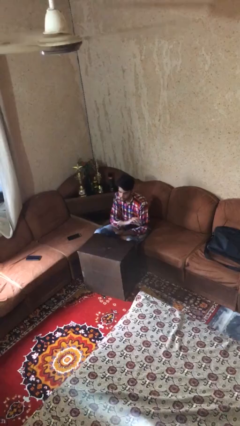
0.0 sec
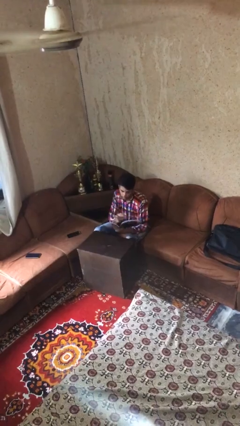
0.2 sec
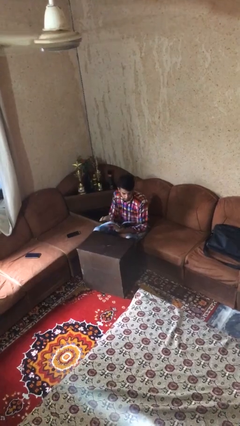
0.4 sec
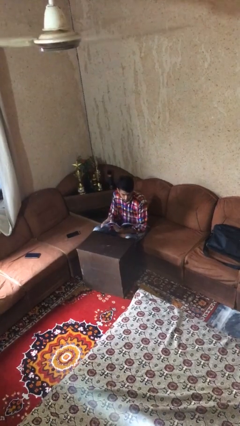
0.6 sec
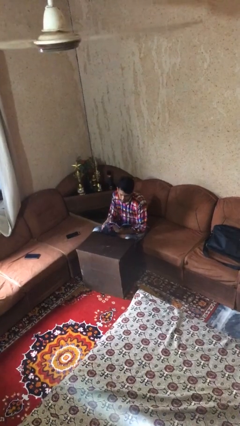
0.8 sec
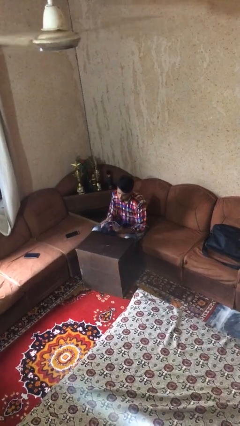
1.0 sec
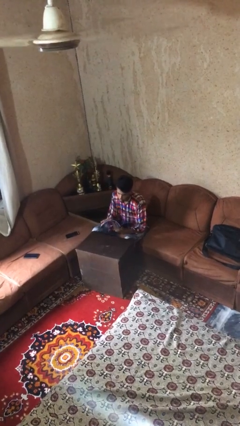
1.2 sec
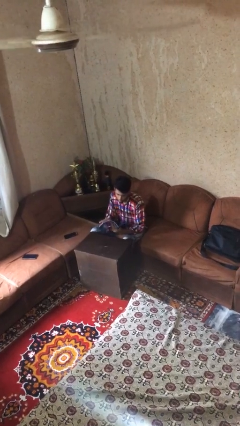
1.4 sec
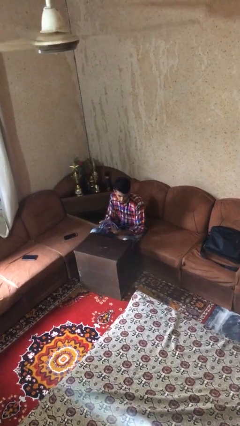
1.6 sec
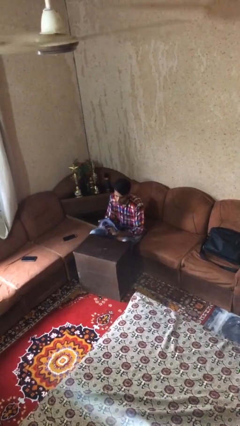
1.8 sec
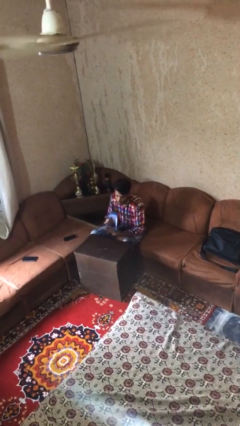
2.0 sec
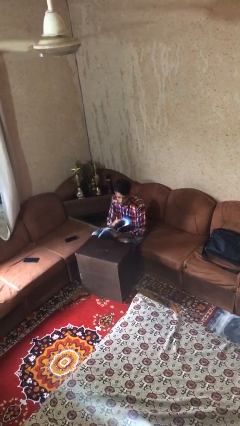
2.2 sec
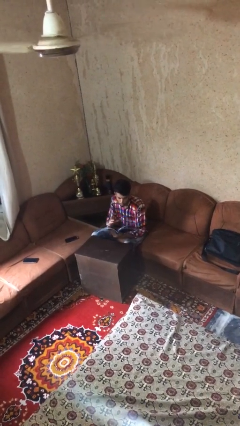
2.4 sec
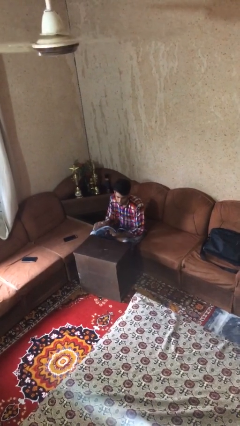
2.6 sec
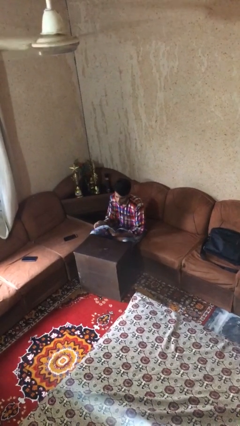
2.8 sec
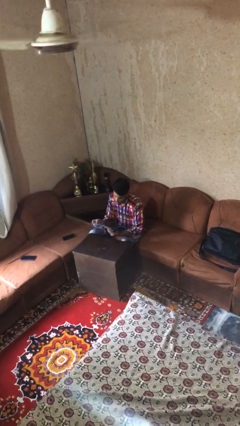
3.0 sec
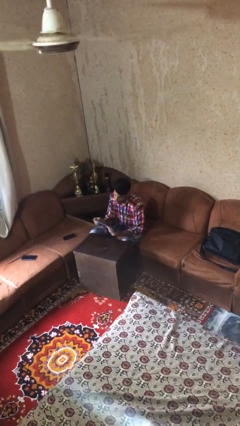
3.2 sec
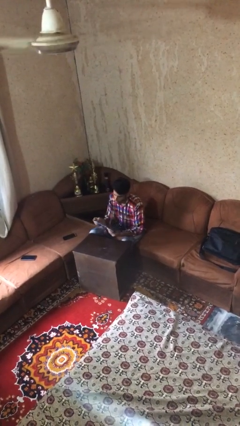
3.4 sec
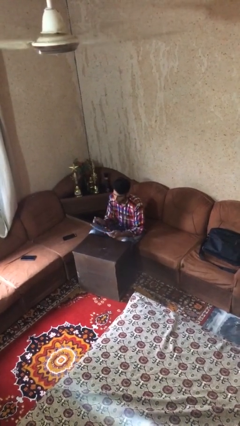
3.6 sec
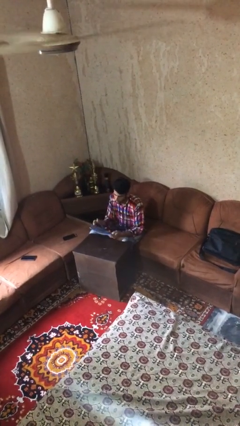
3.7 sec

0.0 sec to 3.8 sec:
person reads document

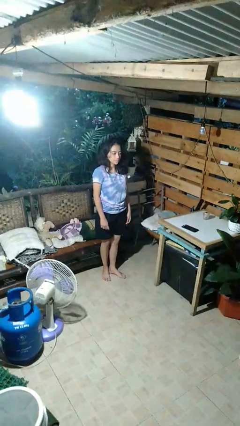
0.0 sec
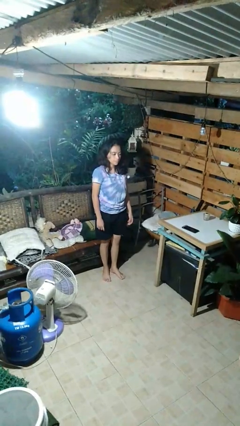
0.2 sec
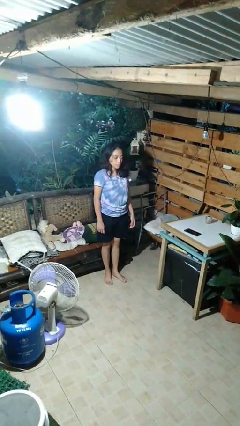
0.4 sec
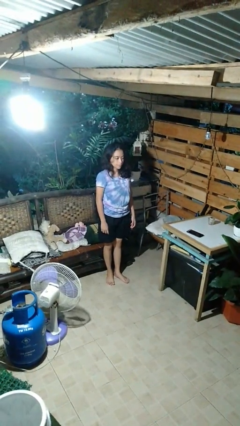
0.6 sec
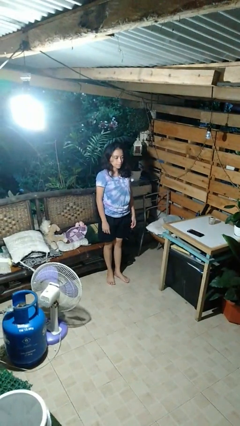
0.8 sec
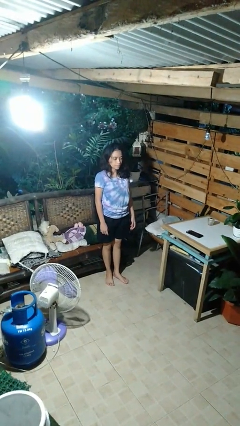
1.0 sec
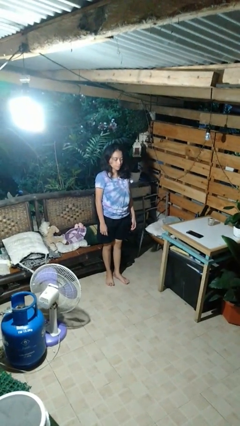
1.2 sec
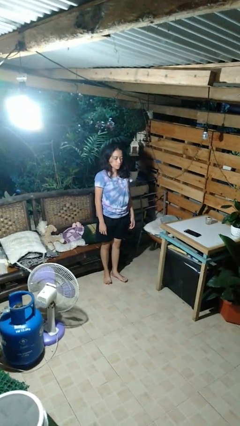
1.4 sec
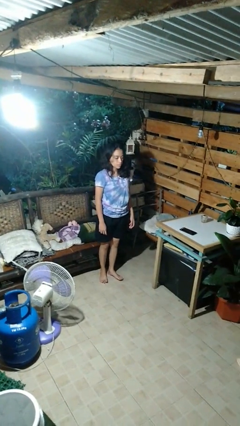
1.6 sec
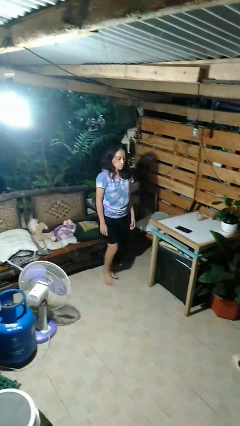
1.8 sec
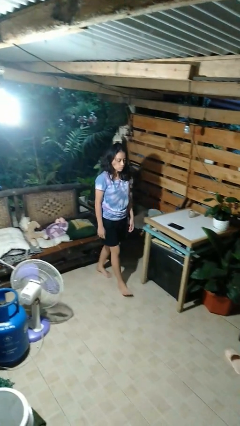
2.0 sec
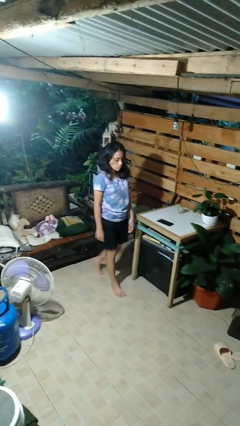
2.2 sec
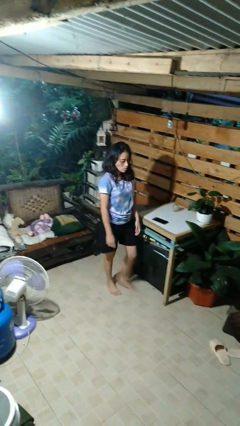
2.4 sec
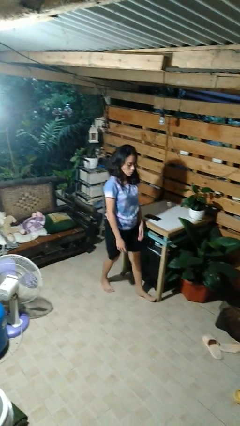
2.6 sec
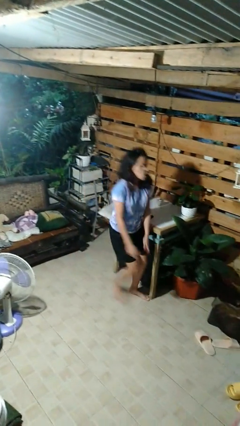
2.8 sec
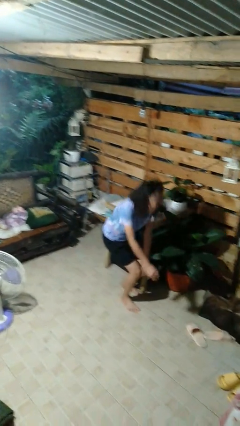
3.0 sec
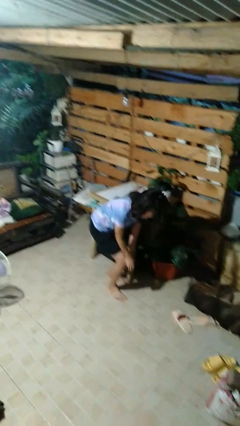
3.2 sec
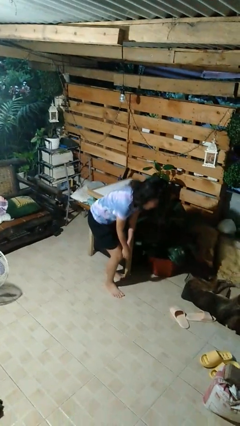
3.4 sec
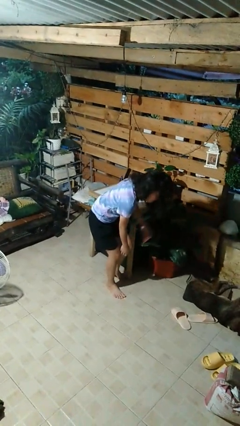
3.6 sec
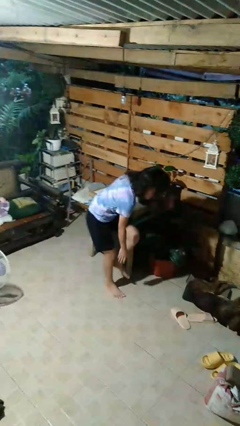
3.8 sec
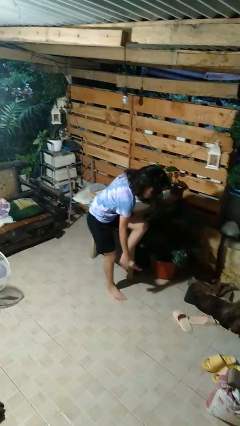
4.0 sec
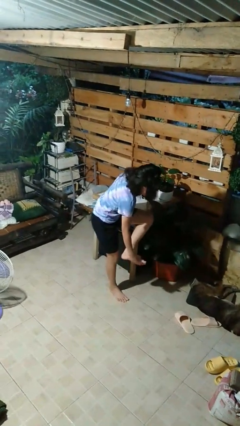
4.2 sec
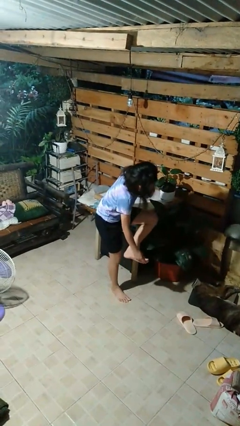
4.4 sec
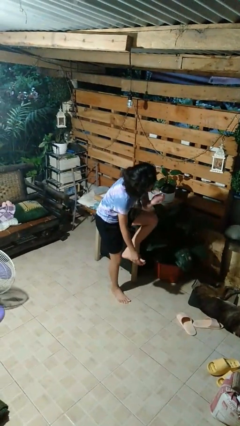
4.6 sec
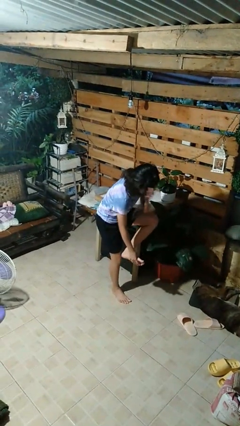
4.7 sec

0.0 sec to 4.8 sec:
person stubs toe

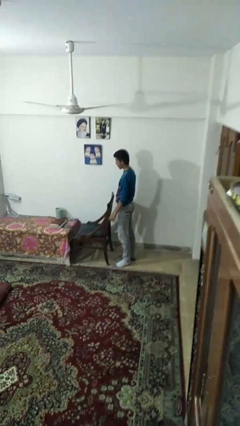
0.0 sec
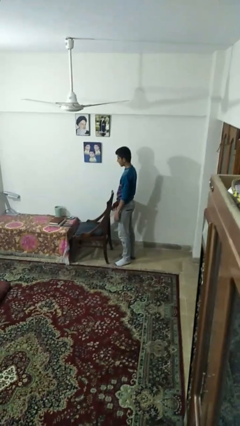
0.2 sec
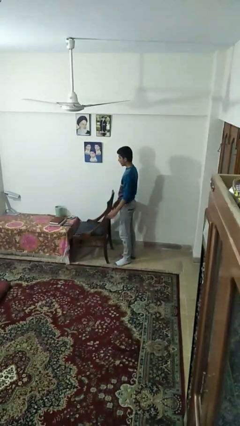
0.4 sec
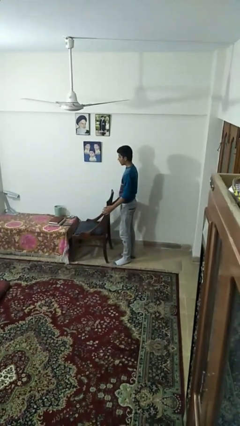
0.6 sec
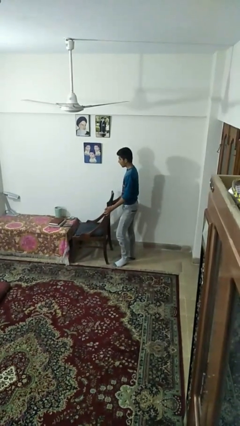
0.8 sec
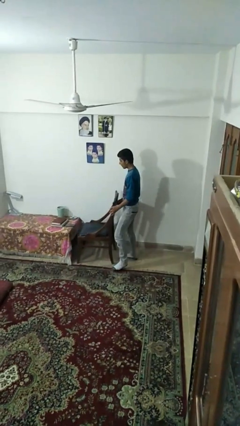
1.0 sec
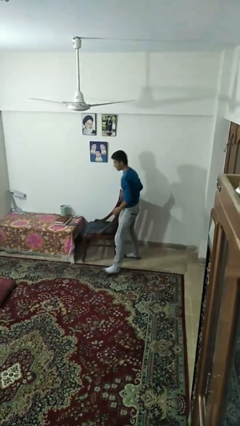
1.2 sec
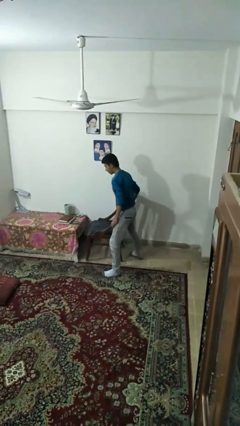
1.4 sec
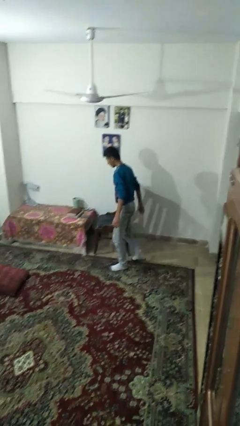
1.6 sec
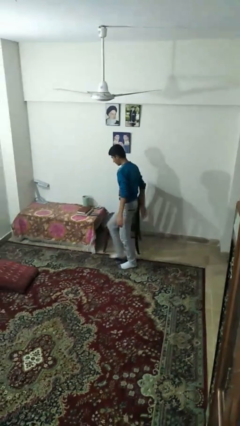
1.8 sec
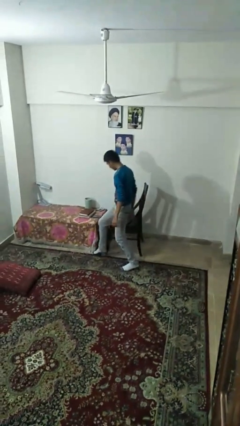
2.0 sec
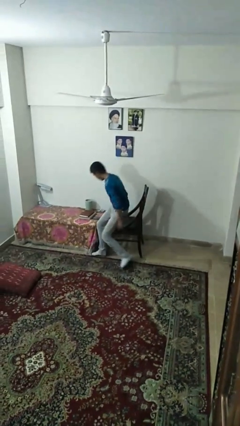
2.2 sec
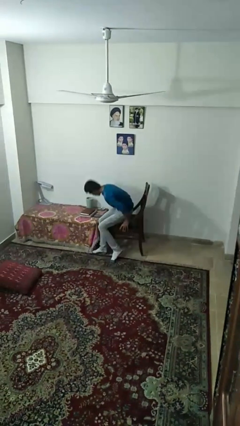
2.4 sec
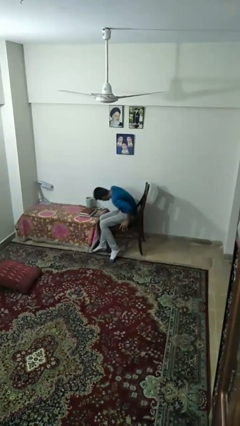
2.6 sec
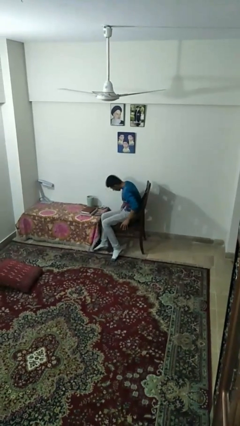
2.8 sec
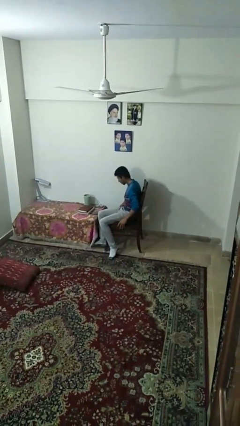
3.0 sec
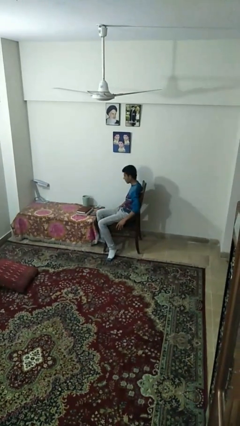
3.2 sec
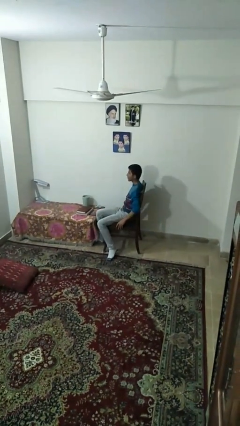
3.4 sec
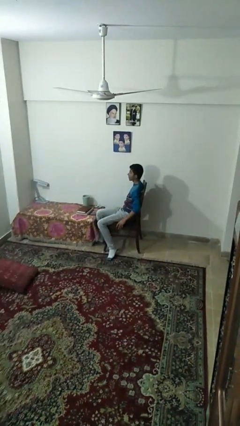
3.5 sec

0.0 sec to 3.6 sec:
person sits down

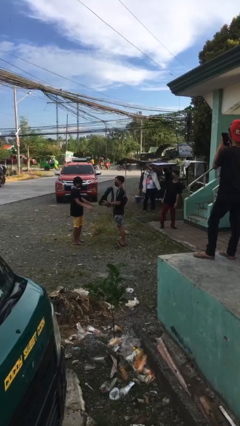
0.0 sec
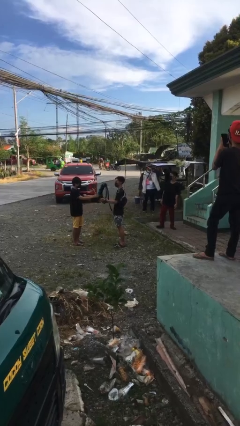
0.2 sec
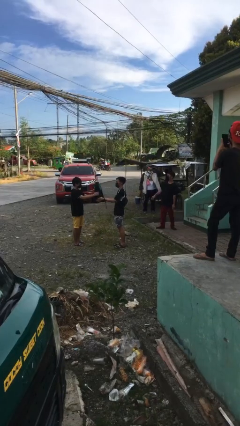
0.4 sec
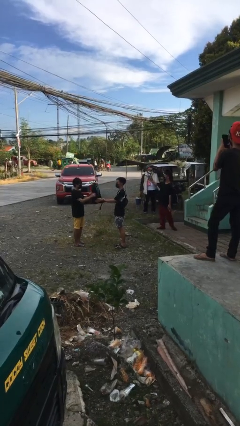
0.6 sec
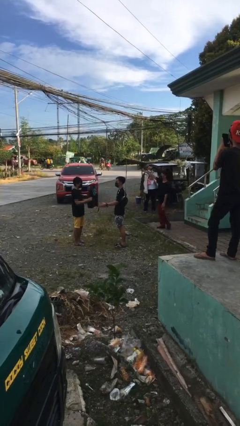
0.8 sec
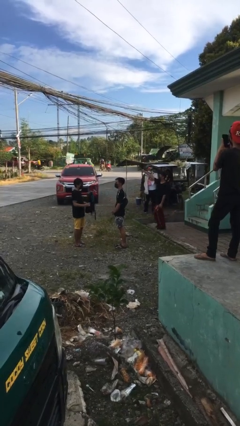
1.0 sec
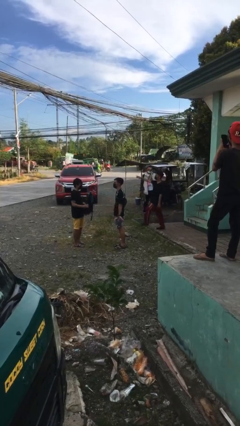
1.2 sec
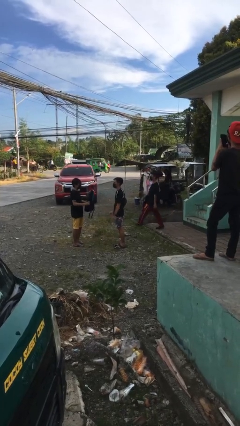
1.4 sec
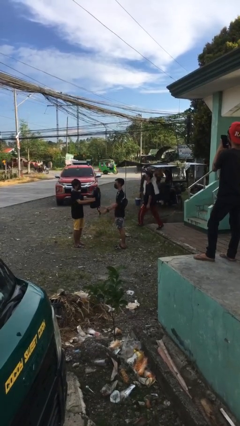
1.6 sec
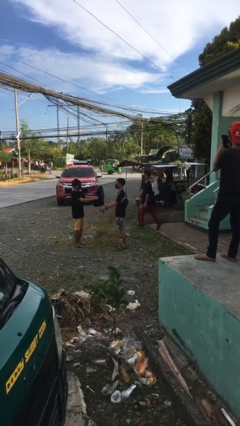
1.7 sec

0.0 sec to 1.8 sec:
person transfers object to person

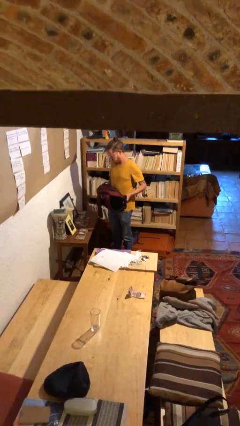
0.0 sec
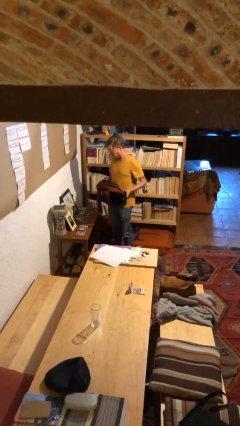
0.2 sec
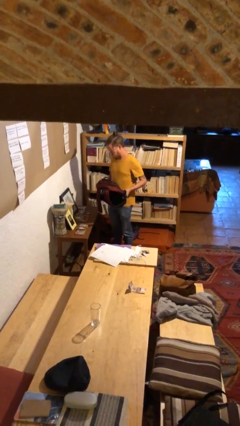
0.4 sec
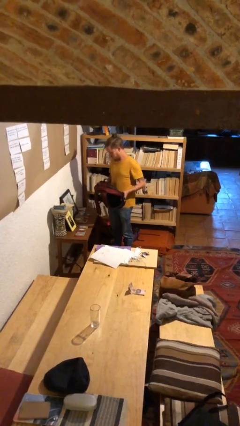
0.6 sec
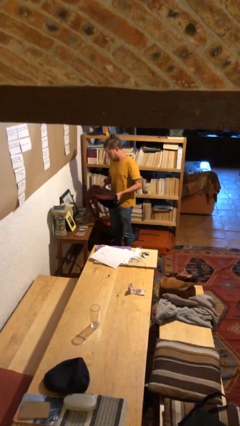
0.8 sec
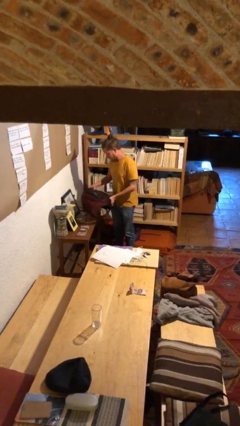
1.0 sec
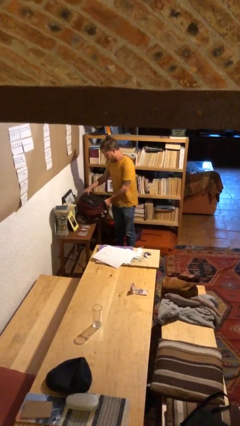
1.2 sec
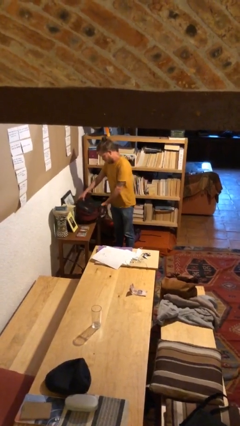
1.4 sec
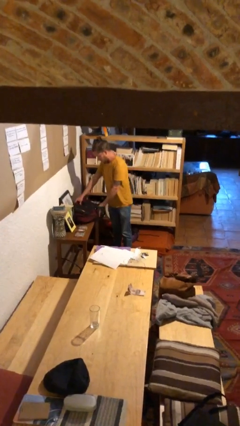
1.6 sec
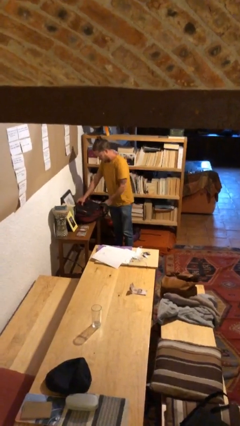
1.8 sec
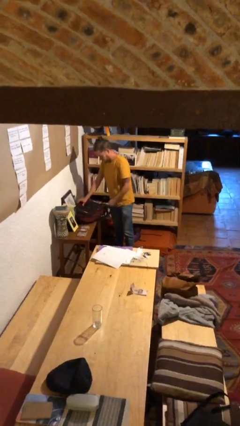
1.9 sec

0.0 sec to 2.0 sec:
person puts down object on table

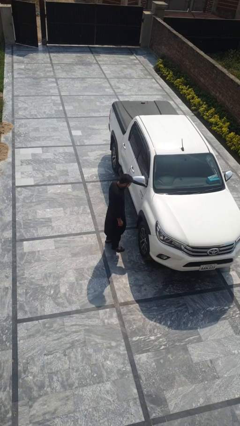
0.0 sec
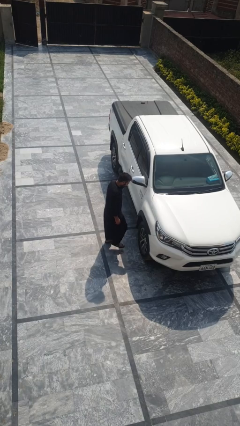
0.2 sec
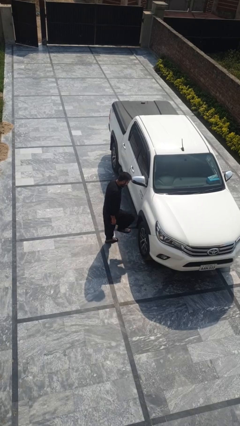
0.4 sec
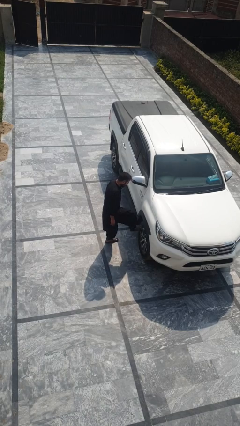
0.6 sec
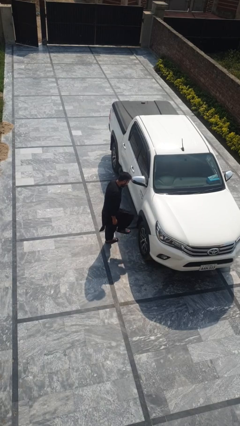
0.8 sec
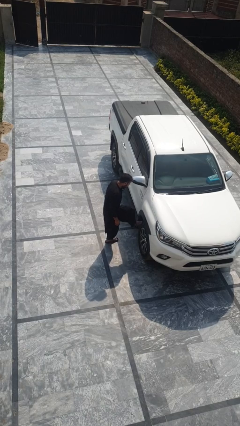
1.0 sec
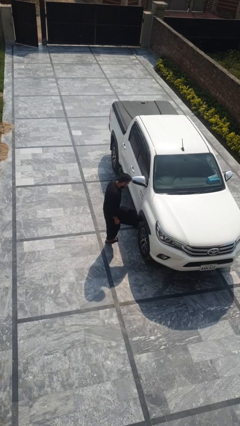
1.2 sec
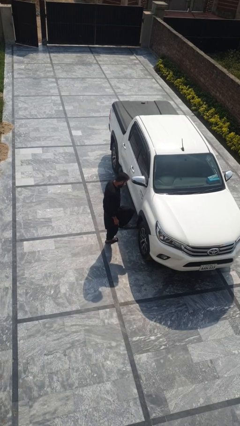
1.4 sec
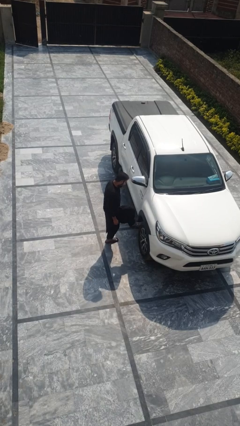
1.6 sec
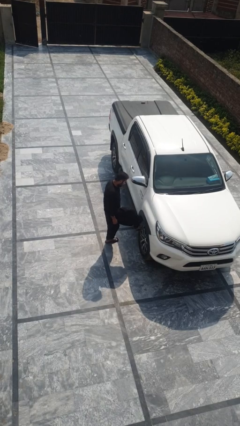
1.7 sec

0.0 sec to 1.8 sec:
person kicks car tires
